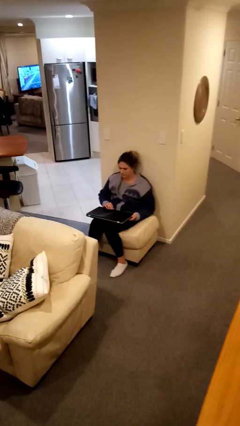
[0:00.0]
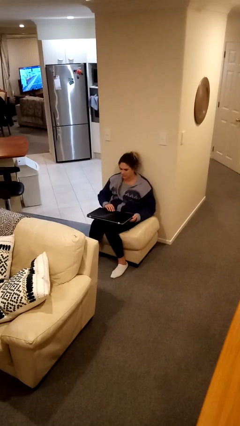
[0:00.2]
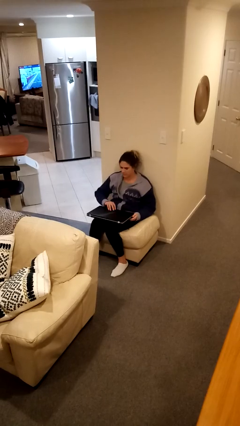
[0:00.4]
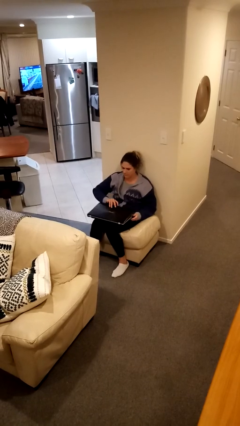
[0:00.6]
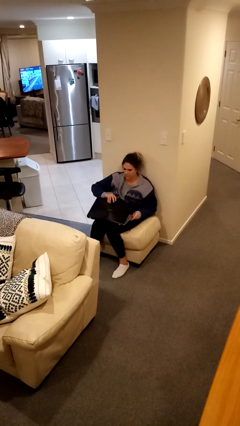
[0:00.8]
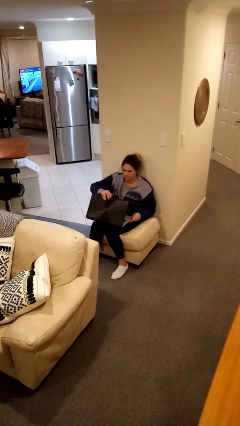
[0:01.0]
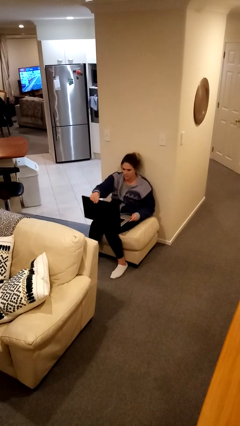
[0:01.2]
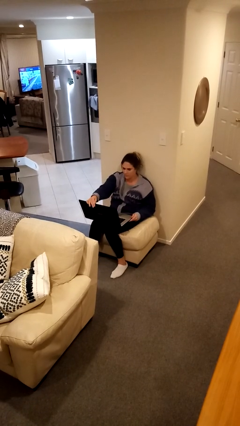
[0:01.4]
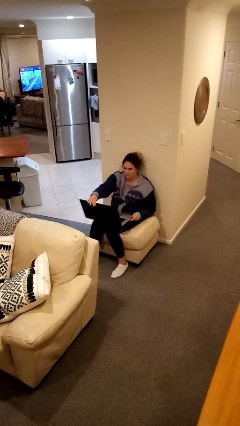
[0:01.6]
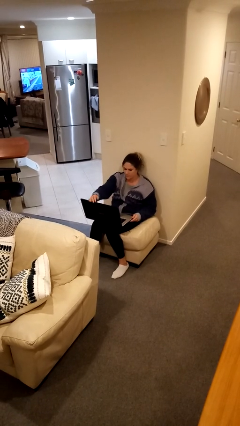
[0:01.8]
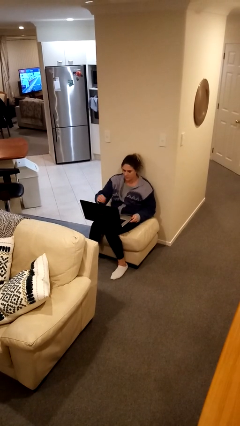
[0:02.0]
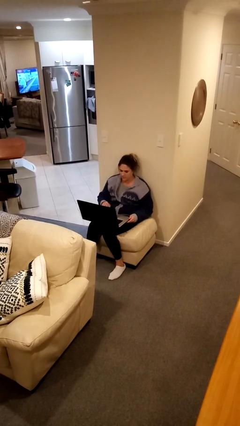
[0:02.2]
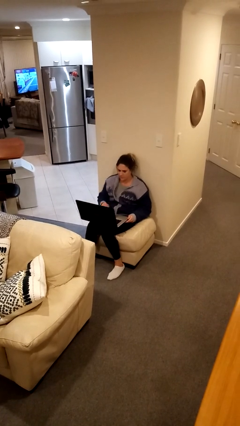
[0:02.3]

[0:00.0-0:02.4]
person opens laptop

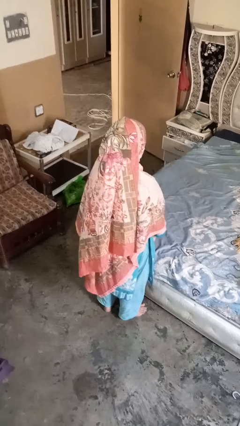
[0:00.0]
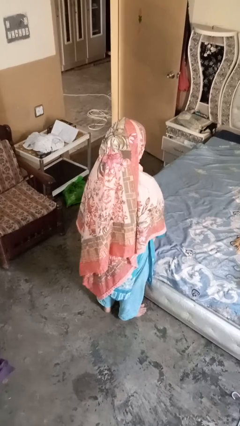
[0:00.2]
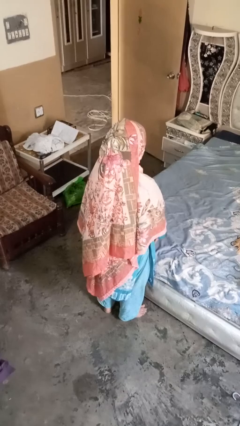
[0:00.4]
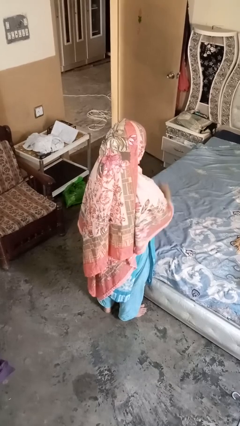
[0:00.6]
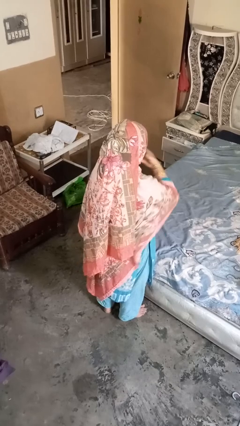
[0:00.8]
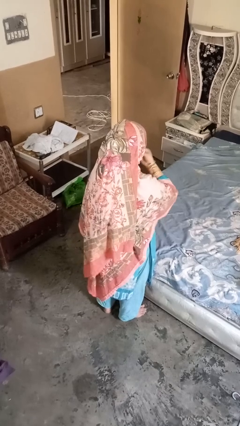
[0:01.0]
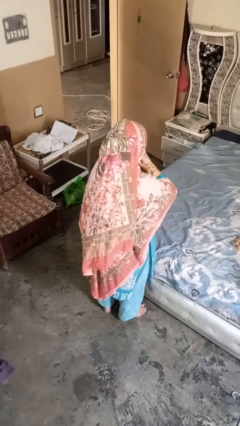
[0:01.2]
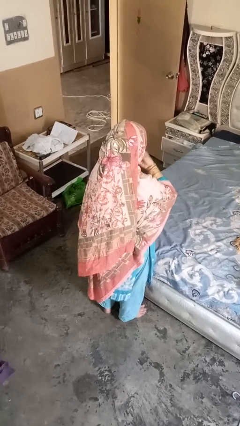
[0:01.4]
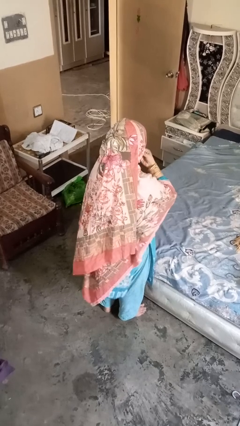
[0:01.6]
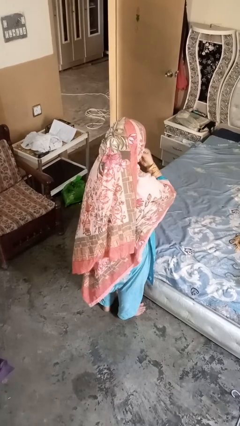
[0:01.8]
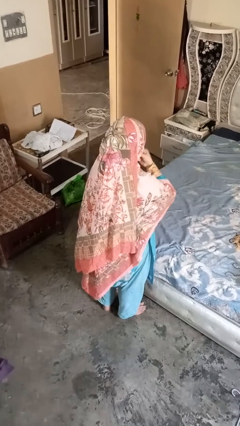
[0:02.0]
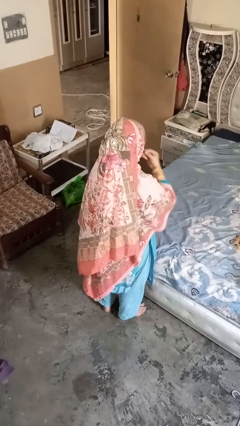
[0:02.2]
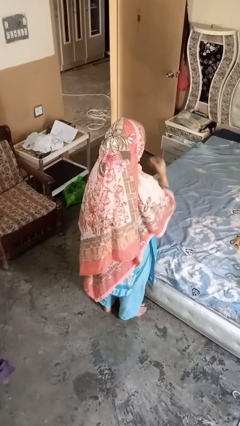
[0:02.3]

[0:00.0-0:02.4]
person strokes chin

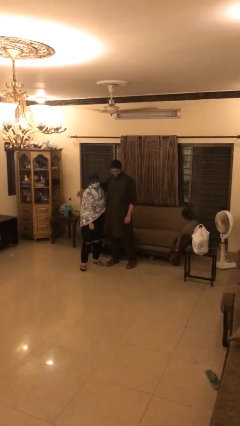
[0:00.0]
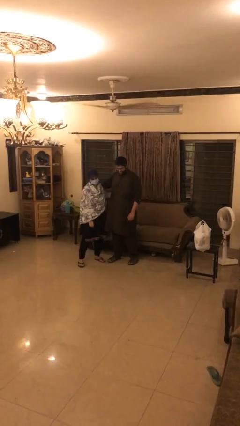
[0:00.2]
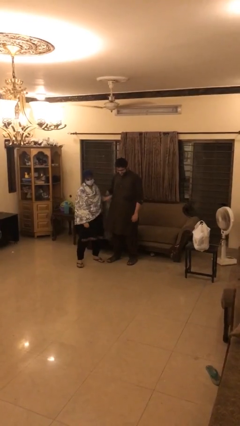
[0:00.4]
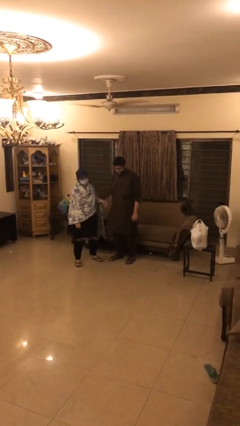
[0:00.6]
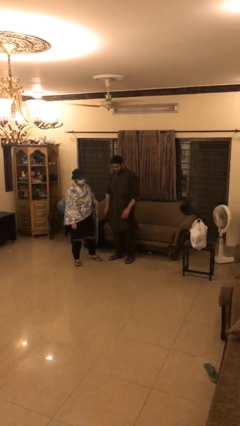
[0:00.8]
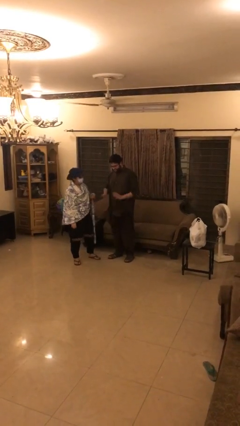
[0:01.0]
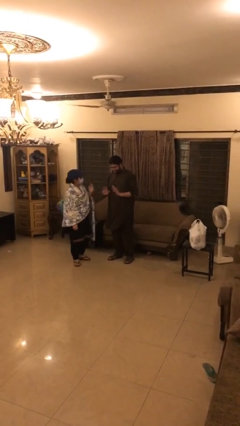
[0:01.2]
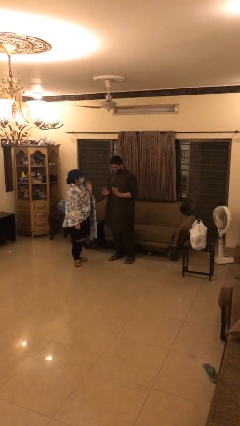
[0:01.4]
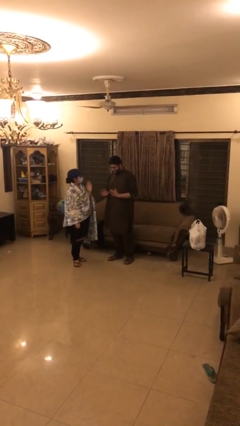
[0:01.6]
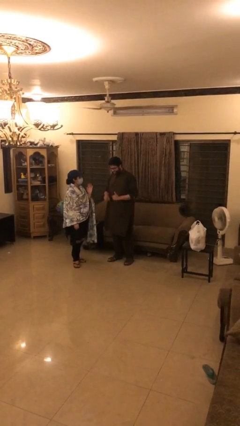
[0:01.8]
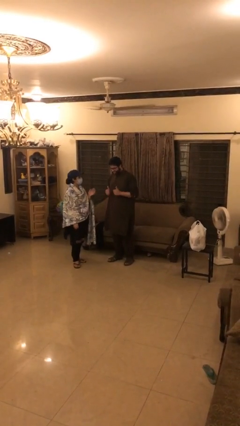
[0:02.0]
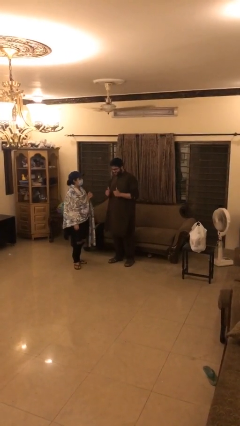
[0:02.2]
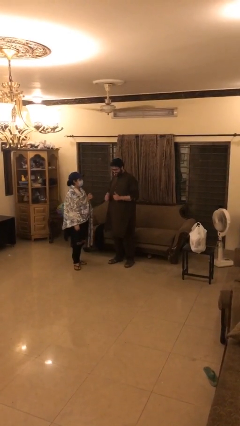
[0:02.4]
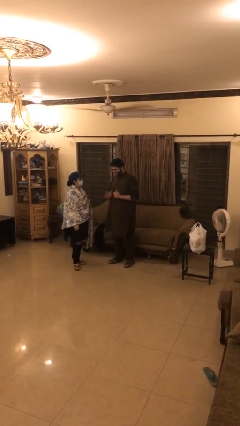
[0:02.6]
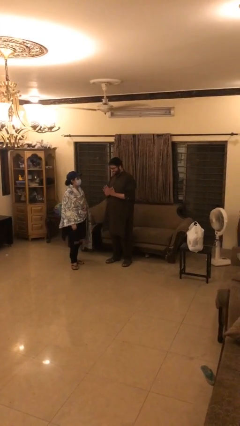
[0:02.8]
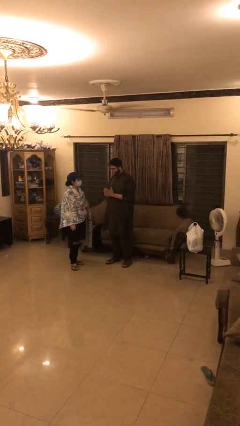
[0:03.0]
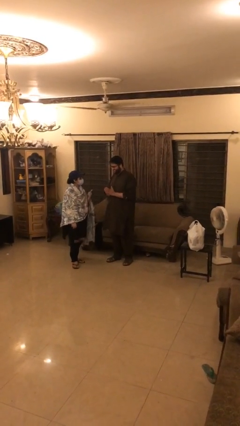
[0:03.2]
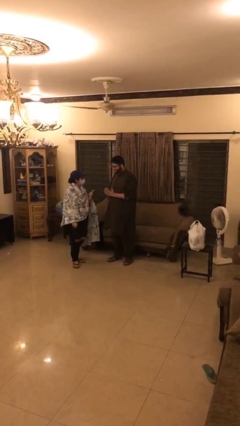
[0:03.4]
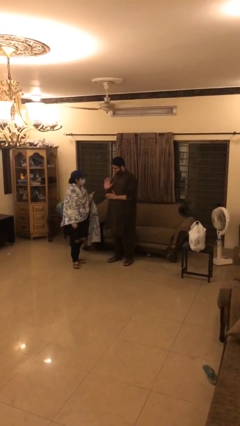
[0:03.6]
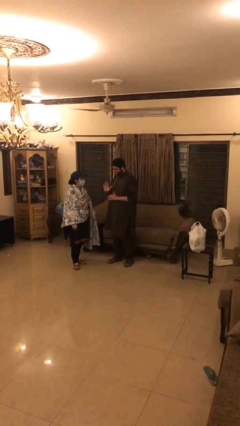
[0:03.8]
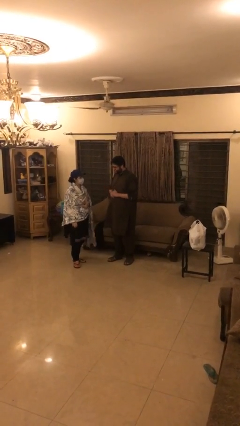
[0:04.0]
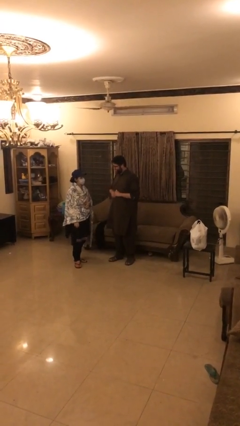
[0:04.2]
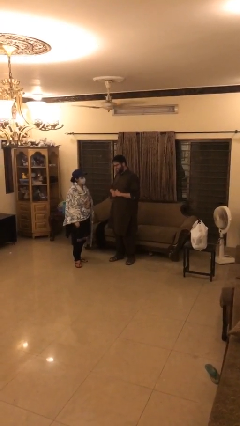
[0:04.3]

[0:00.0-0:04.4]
person talks to person

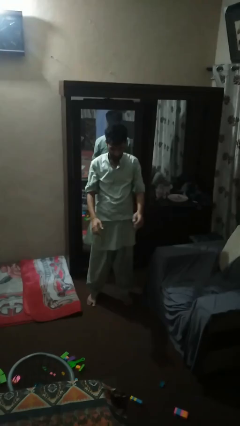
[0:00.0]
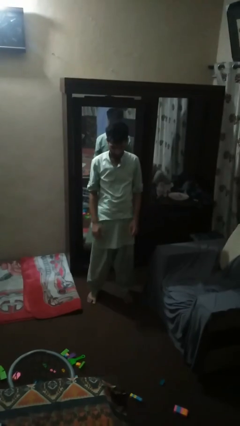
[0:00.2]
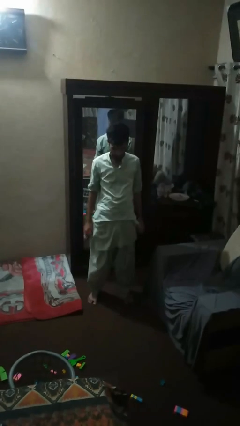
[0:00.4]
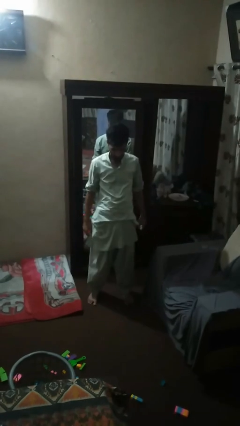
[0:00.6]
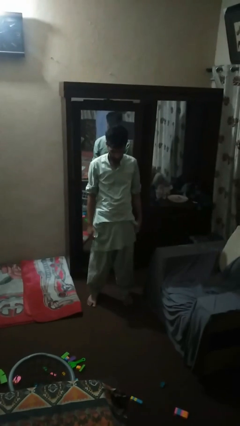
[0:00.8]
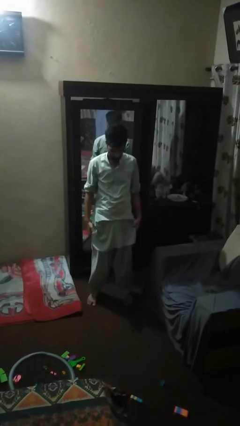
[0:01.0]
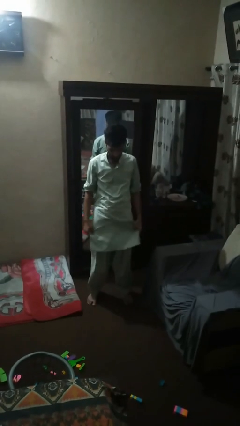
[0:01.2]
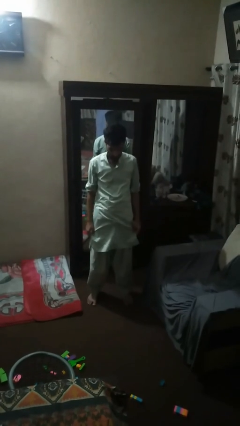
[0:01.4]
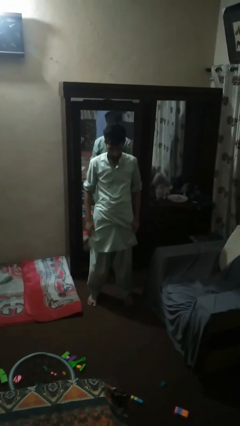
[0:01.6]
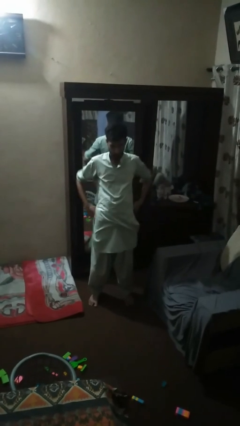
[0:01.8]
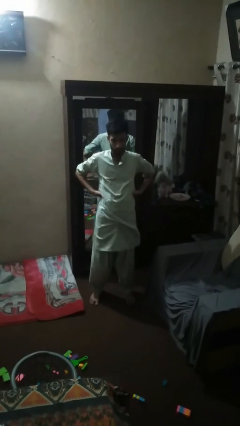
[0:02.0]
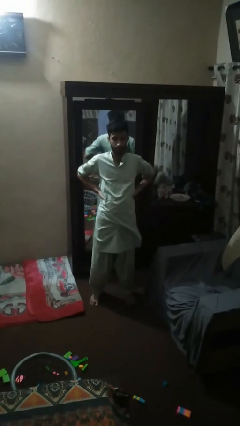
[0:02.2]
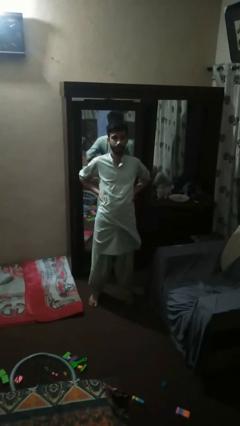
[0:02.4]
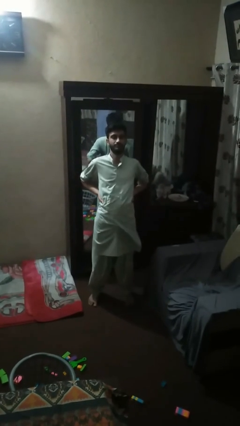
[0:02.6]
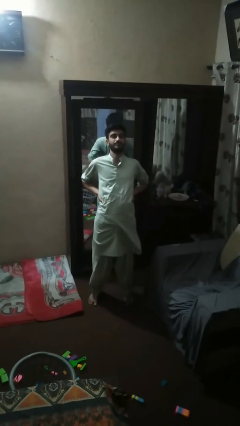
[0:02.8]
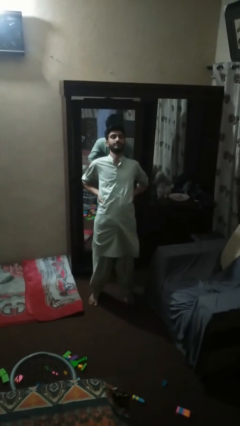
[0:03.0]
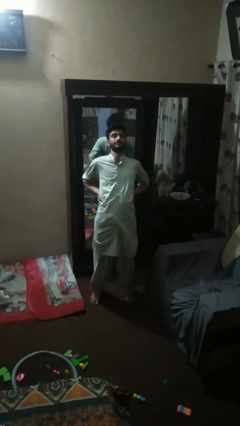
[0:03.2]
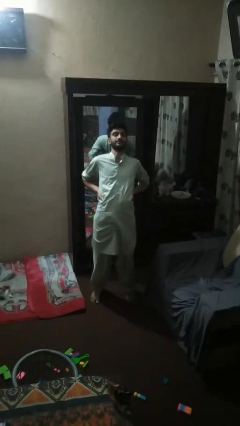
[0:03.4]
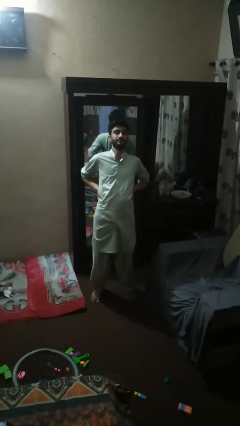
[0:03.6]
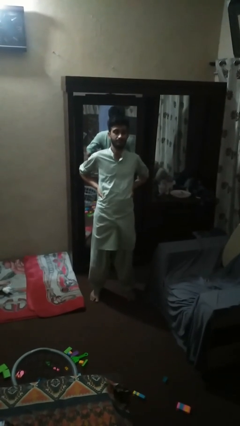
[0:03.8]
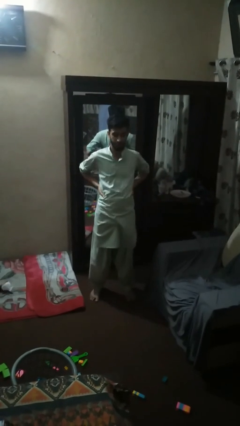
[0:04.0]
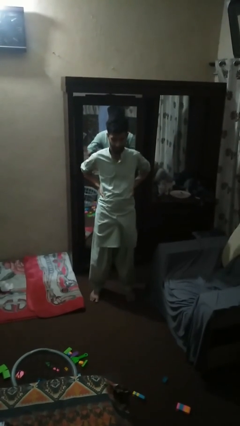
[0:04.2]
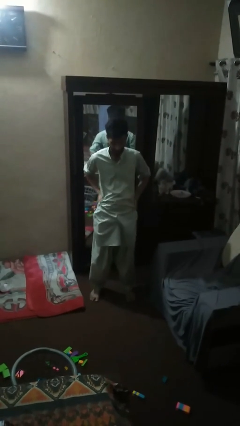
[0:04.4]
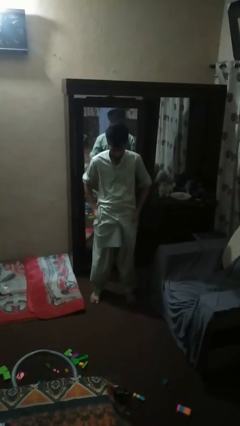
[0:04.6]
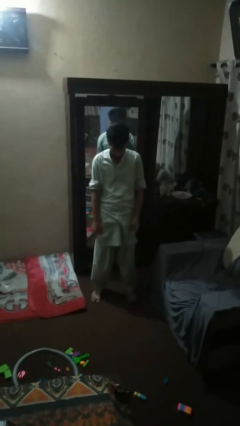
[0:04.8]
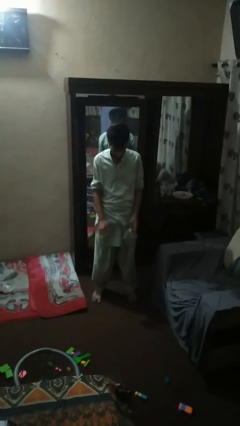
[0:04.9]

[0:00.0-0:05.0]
person stretches back

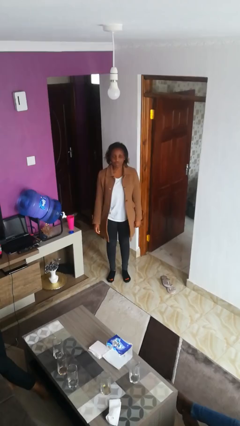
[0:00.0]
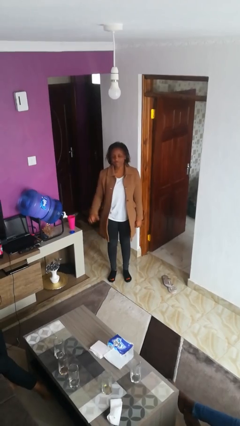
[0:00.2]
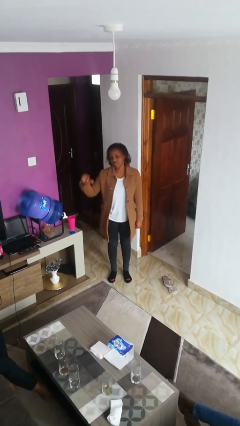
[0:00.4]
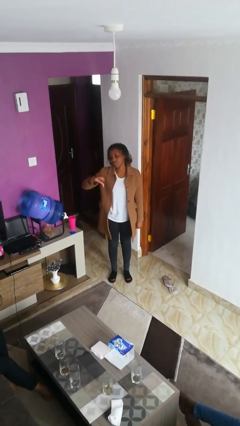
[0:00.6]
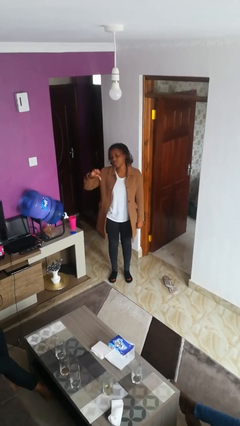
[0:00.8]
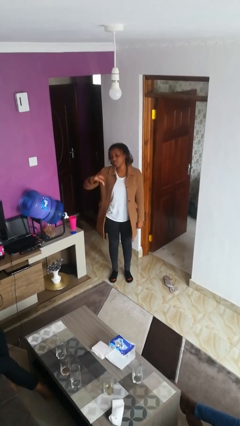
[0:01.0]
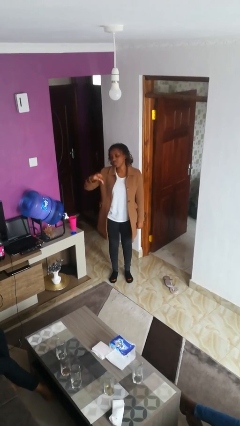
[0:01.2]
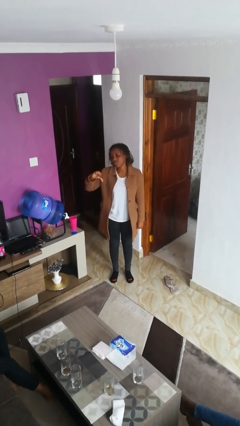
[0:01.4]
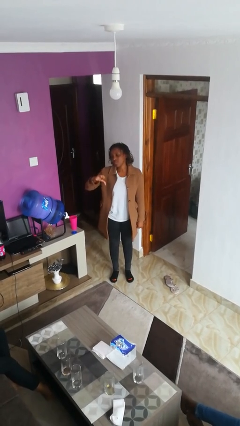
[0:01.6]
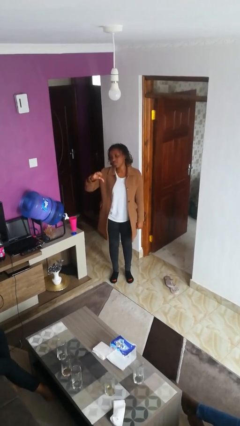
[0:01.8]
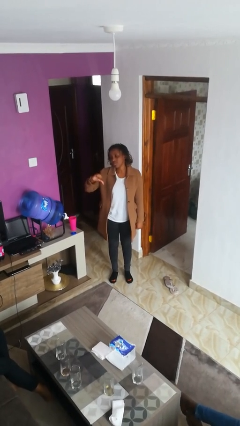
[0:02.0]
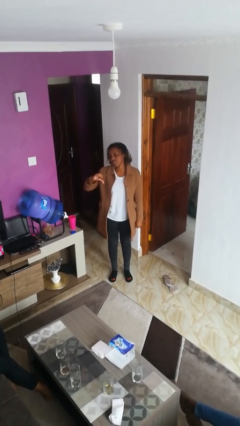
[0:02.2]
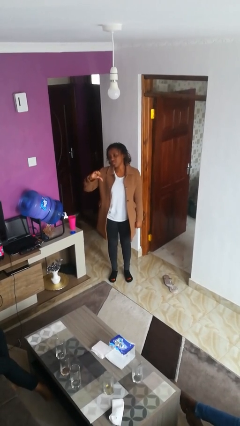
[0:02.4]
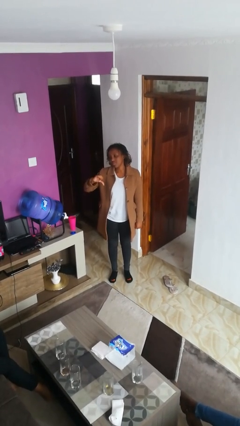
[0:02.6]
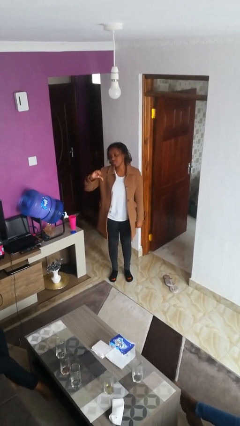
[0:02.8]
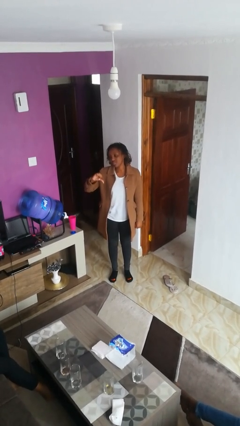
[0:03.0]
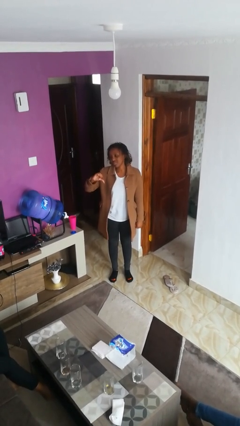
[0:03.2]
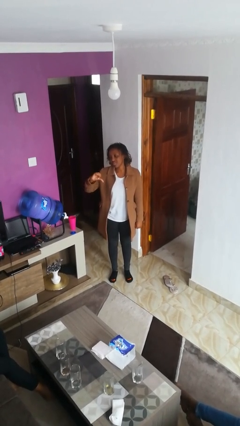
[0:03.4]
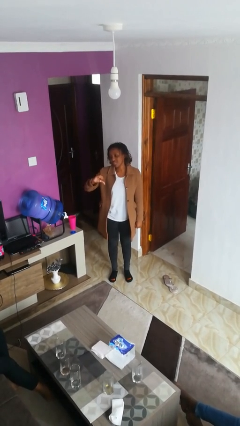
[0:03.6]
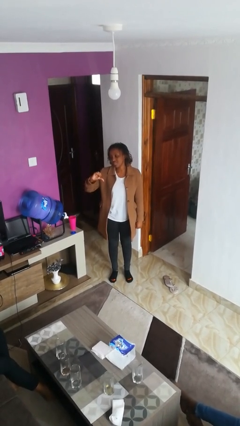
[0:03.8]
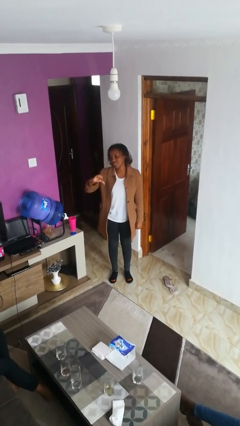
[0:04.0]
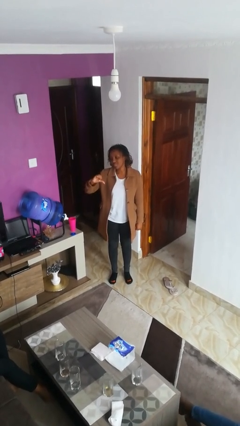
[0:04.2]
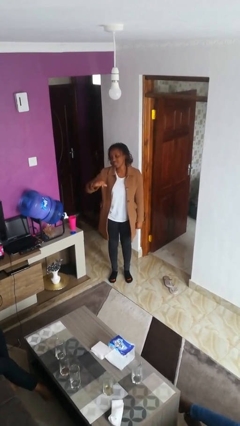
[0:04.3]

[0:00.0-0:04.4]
person gestures thumbs down
